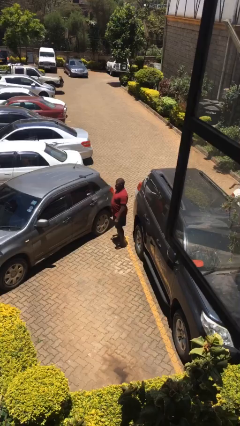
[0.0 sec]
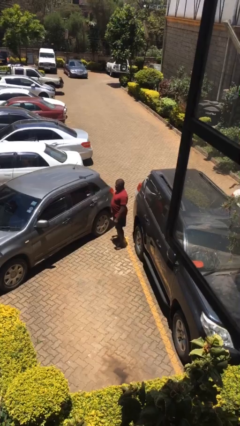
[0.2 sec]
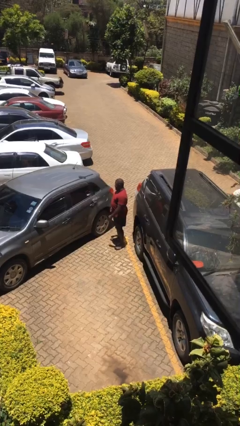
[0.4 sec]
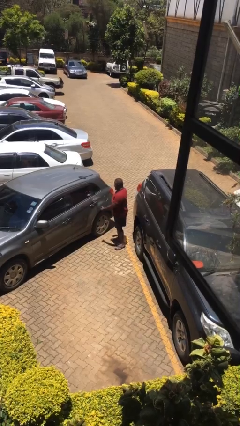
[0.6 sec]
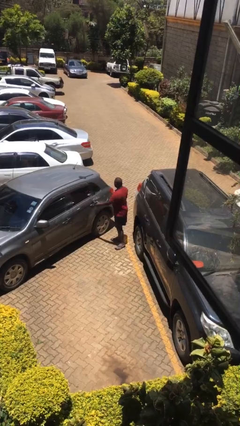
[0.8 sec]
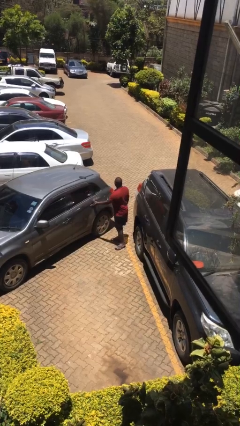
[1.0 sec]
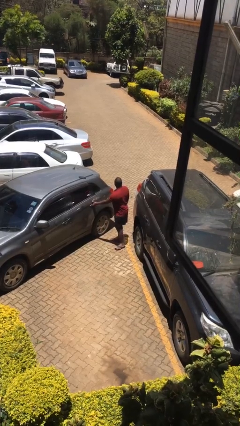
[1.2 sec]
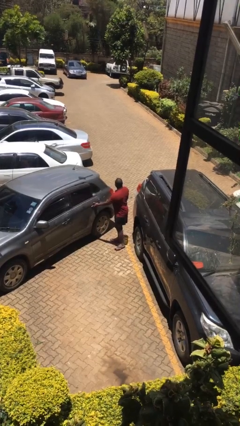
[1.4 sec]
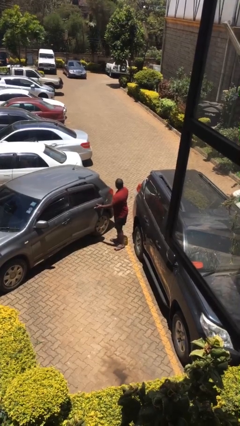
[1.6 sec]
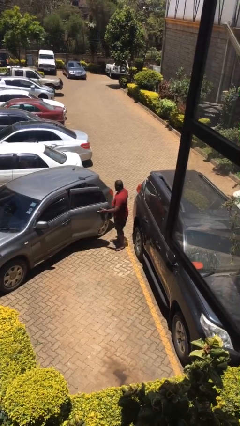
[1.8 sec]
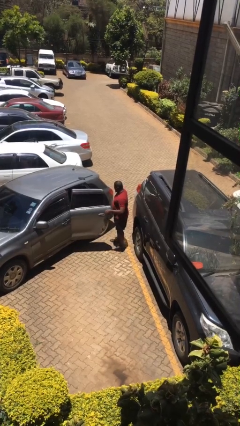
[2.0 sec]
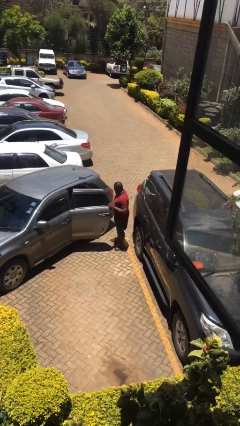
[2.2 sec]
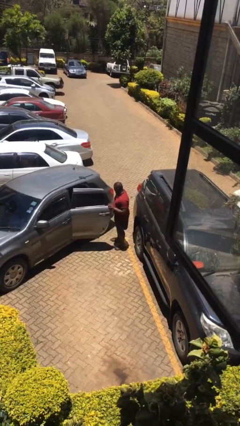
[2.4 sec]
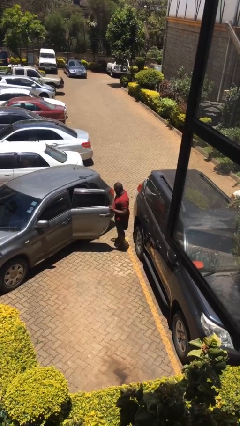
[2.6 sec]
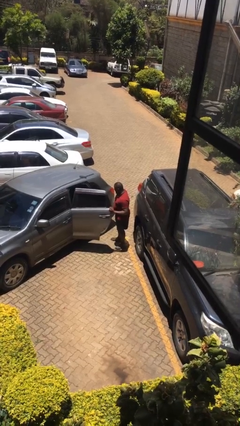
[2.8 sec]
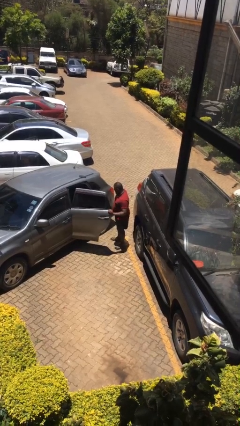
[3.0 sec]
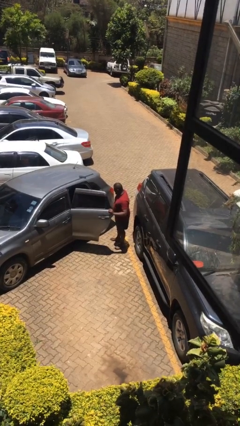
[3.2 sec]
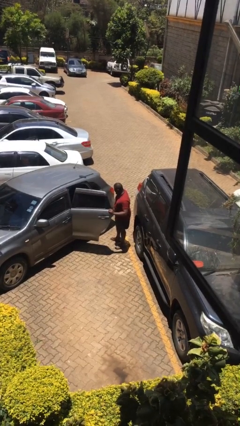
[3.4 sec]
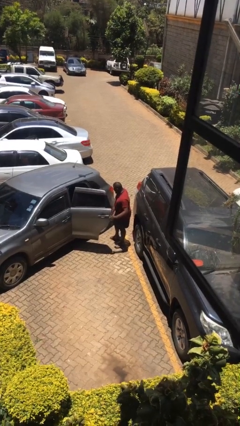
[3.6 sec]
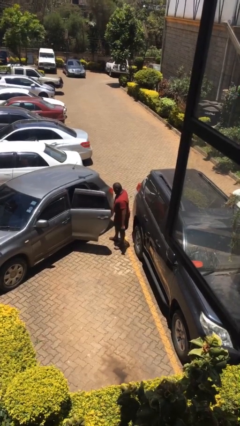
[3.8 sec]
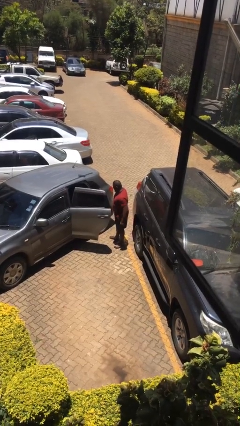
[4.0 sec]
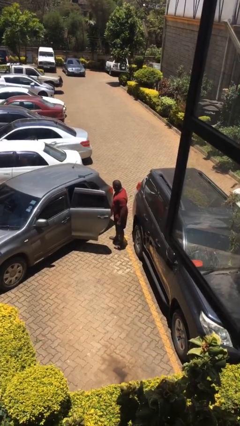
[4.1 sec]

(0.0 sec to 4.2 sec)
person opens car door

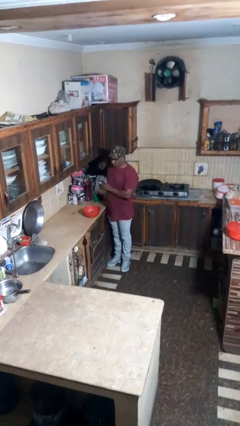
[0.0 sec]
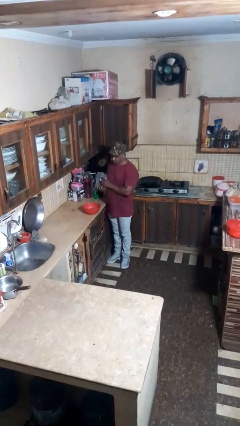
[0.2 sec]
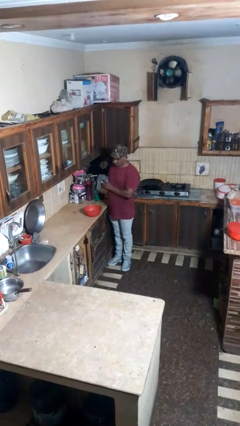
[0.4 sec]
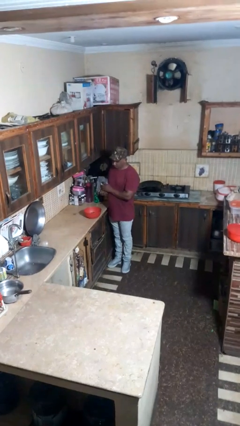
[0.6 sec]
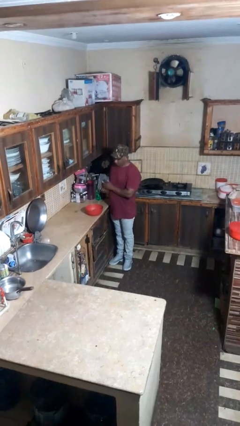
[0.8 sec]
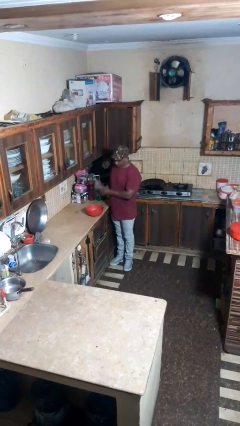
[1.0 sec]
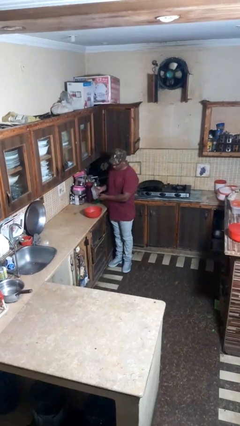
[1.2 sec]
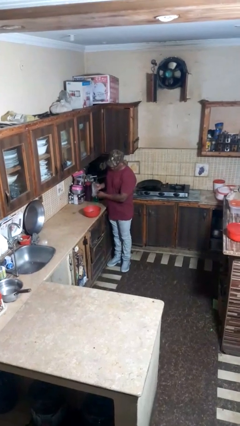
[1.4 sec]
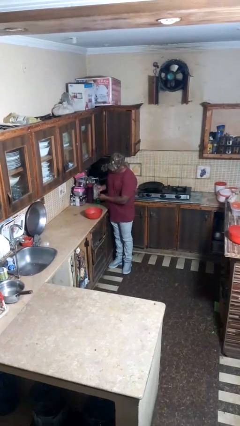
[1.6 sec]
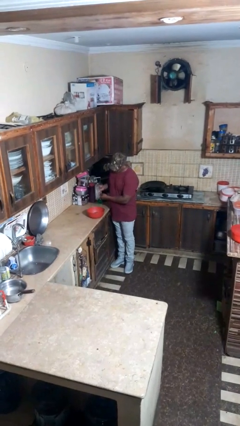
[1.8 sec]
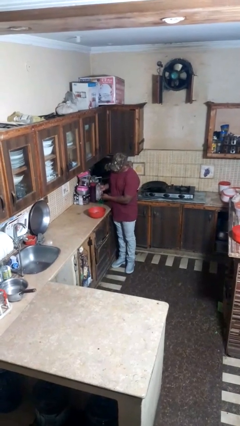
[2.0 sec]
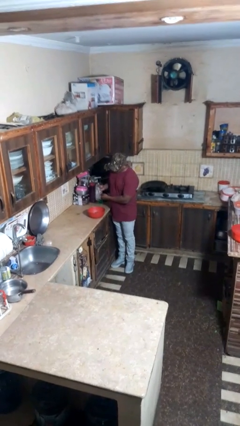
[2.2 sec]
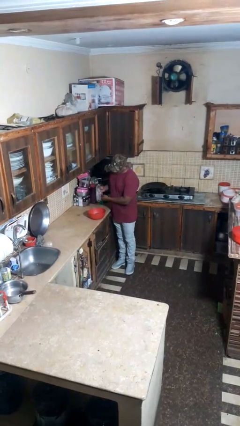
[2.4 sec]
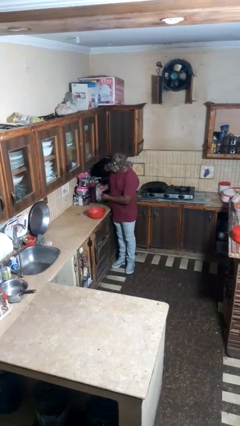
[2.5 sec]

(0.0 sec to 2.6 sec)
person pours into bowl

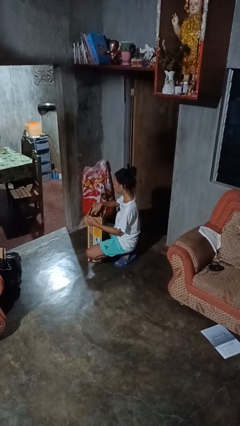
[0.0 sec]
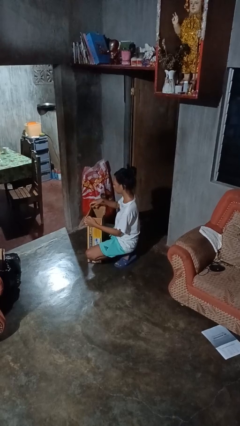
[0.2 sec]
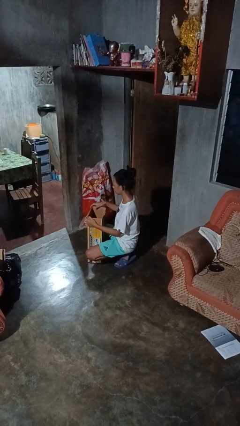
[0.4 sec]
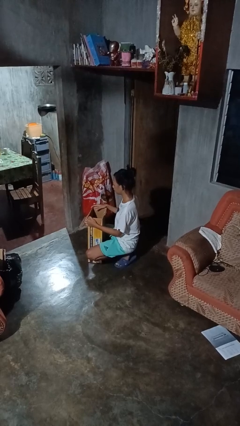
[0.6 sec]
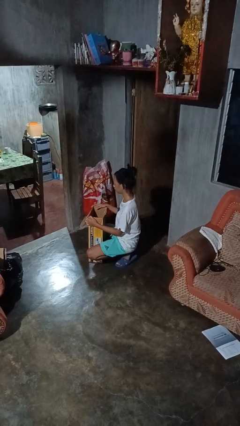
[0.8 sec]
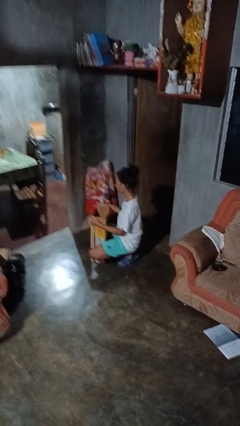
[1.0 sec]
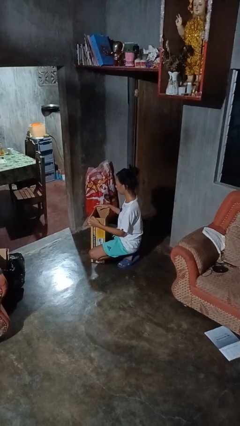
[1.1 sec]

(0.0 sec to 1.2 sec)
person puts object into box

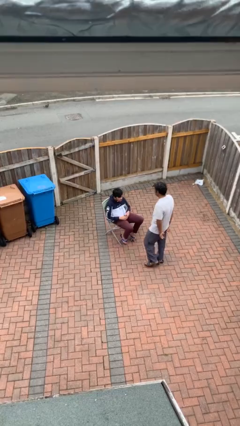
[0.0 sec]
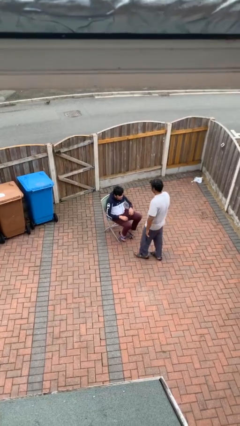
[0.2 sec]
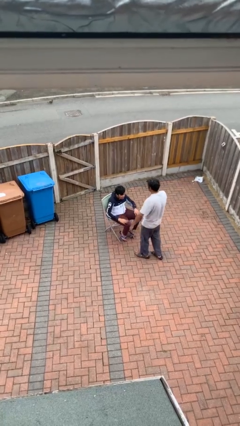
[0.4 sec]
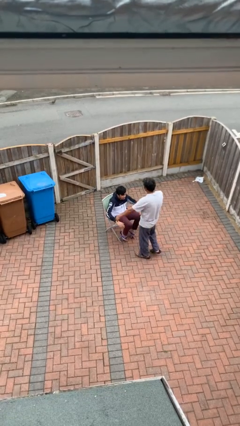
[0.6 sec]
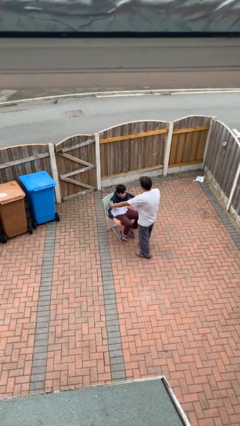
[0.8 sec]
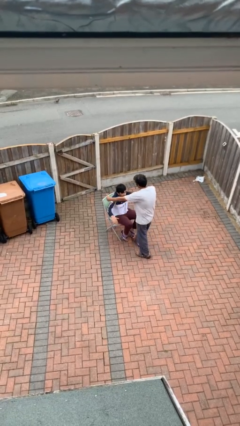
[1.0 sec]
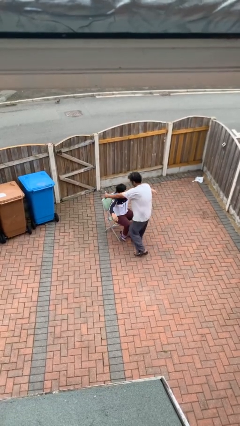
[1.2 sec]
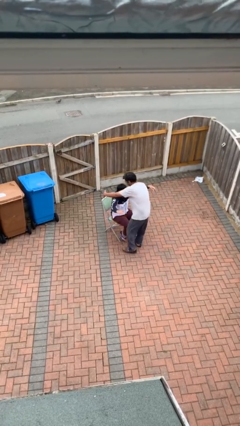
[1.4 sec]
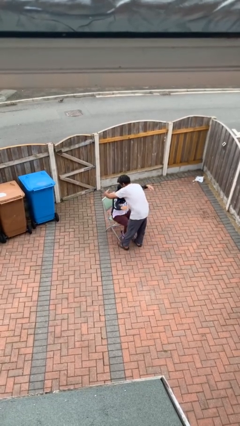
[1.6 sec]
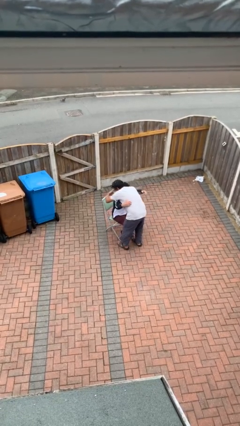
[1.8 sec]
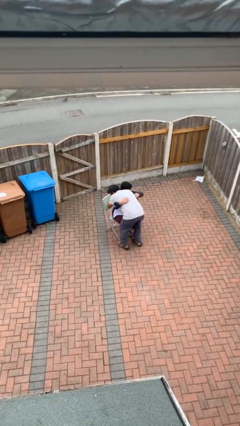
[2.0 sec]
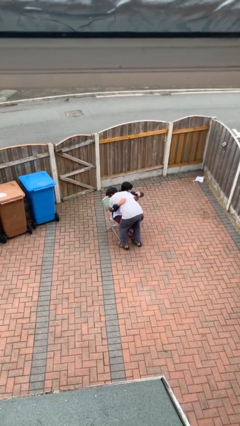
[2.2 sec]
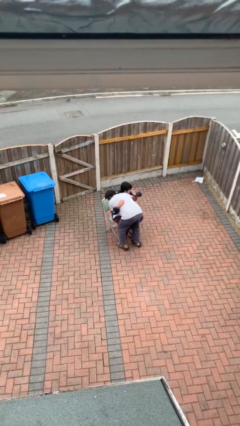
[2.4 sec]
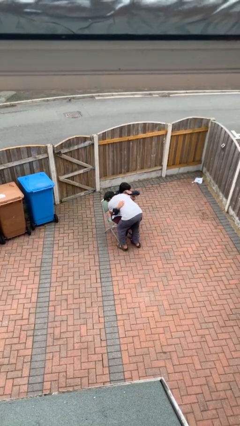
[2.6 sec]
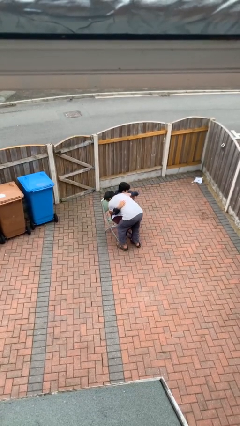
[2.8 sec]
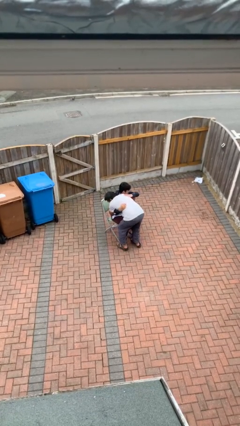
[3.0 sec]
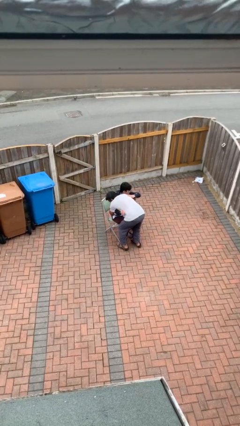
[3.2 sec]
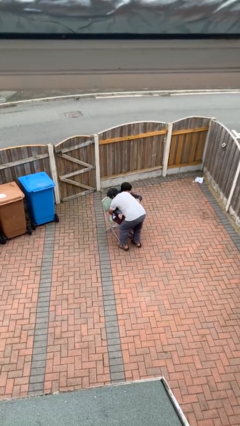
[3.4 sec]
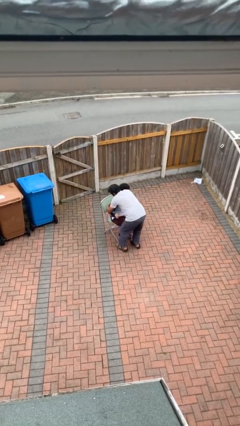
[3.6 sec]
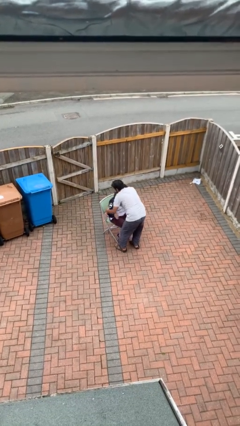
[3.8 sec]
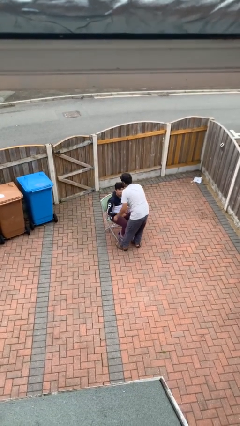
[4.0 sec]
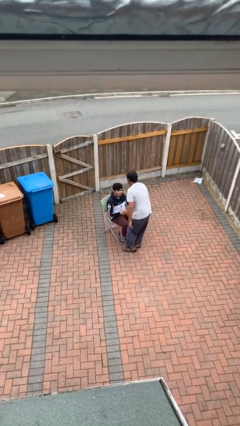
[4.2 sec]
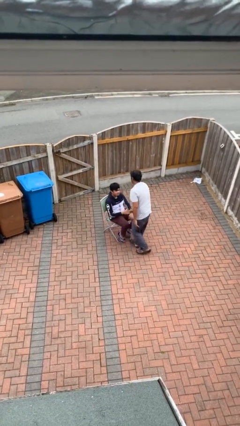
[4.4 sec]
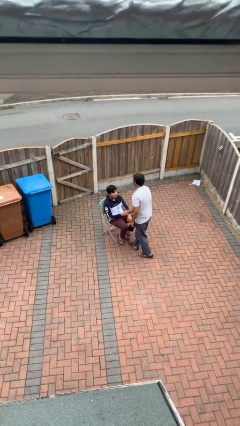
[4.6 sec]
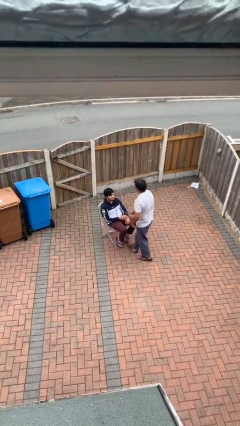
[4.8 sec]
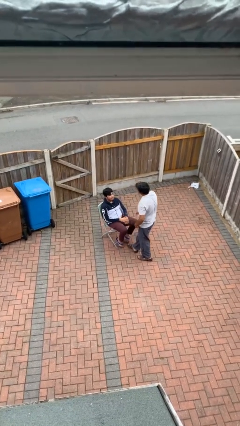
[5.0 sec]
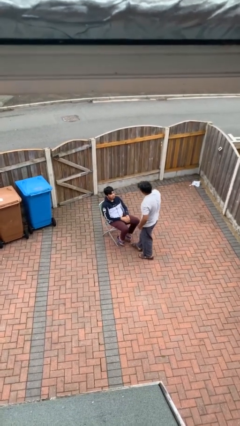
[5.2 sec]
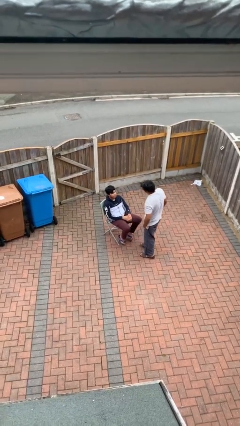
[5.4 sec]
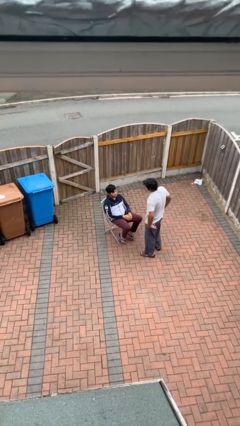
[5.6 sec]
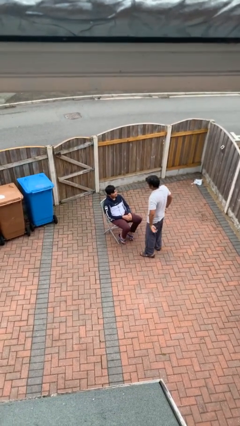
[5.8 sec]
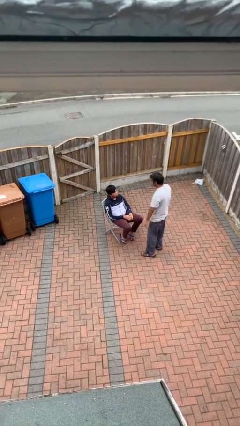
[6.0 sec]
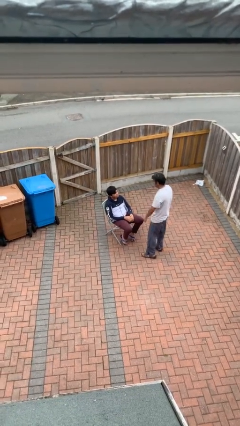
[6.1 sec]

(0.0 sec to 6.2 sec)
person embraces person

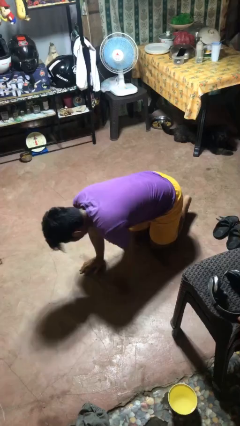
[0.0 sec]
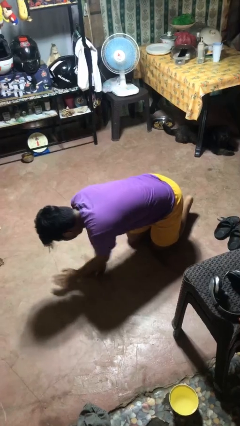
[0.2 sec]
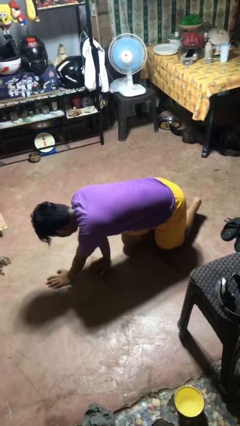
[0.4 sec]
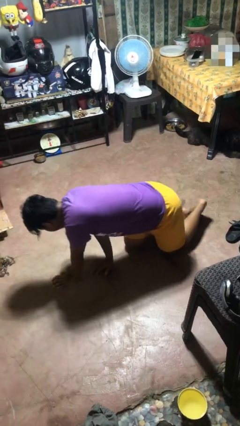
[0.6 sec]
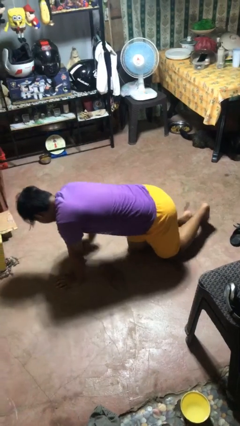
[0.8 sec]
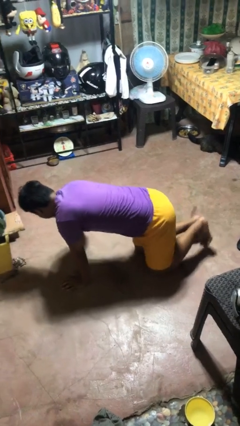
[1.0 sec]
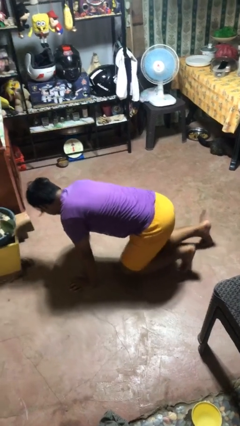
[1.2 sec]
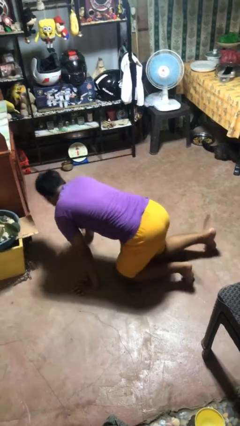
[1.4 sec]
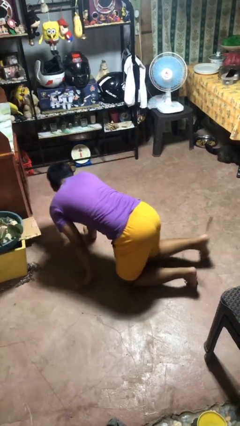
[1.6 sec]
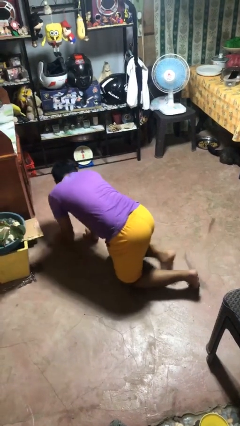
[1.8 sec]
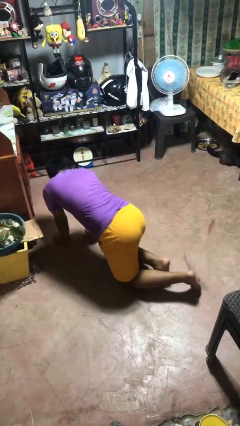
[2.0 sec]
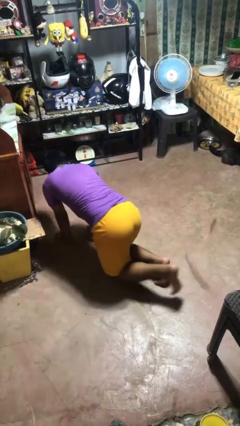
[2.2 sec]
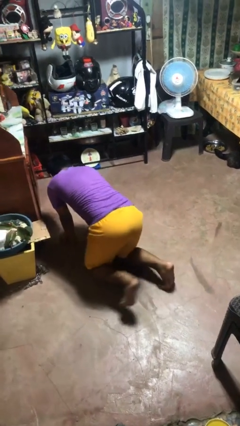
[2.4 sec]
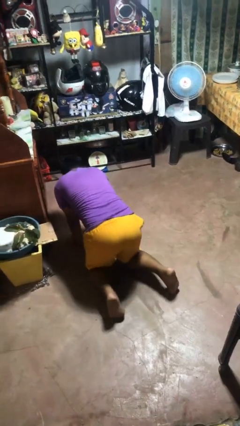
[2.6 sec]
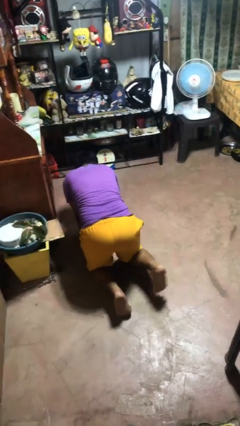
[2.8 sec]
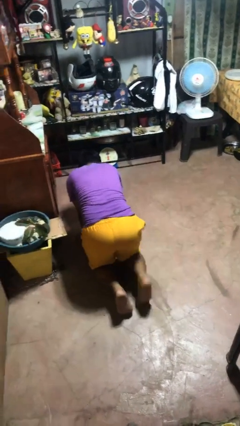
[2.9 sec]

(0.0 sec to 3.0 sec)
person crawls

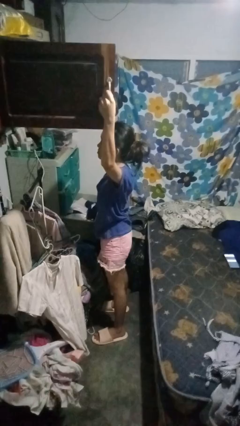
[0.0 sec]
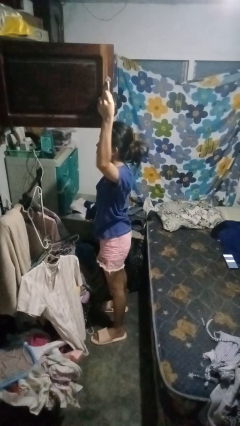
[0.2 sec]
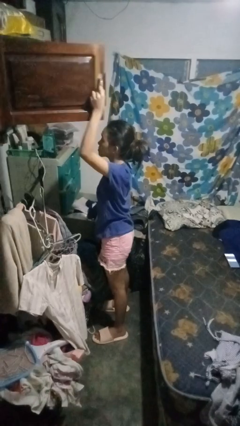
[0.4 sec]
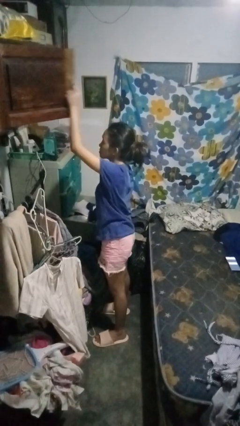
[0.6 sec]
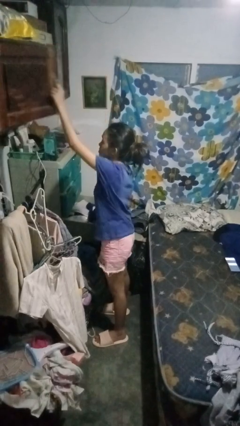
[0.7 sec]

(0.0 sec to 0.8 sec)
person closes closet door
